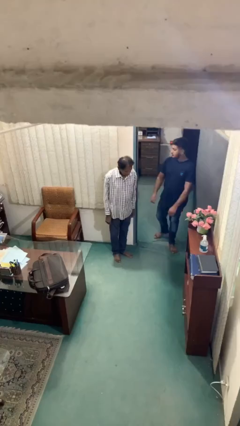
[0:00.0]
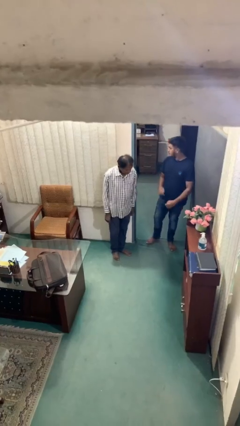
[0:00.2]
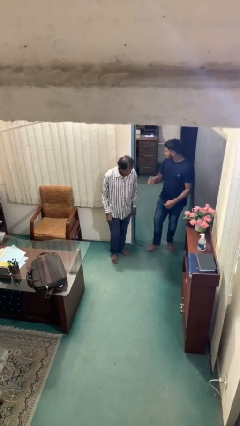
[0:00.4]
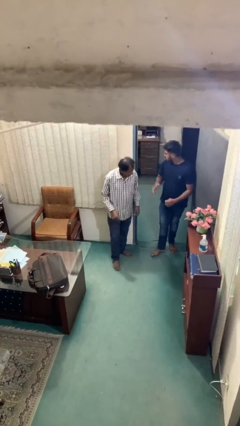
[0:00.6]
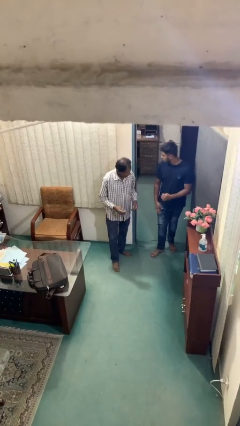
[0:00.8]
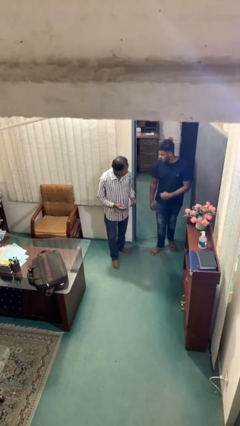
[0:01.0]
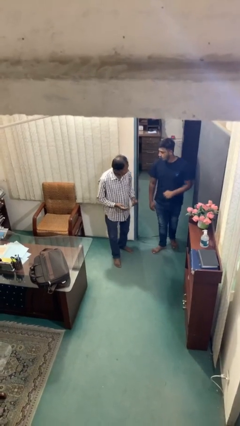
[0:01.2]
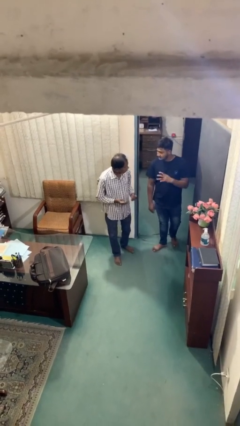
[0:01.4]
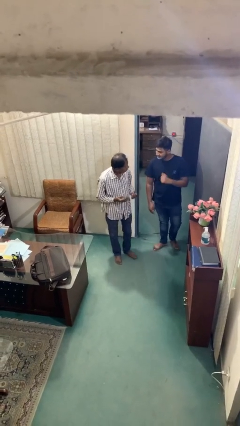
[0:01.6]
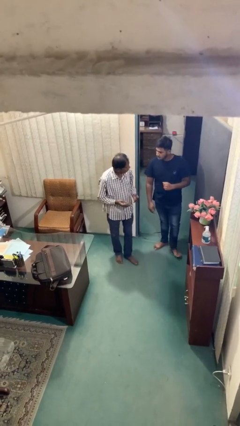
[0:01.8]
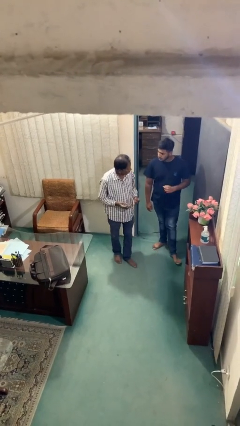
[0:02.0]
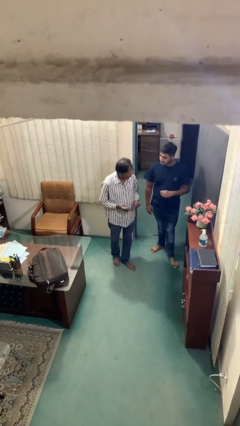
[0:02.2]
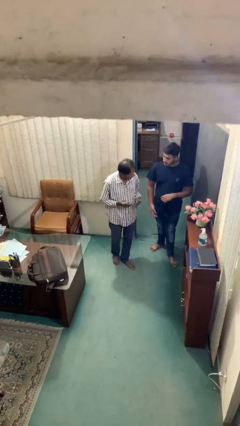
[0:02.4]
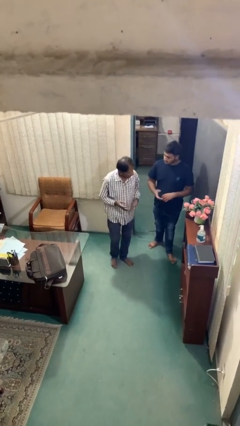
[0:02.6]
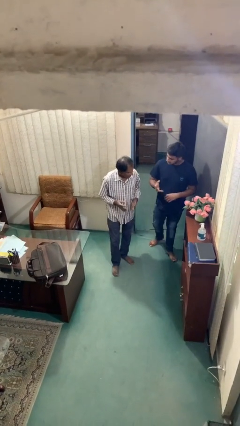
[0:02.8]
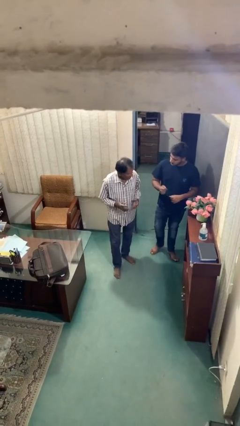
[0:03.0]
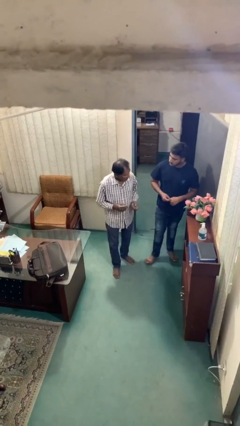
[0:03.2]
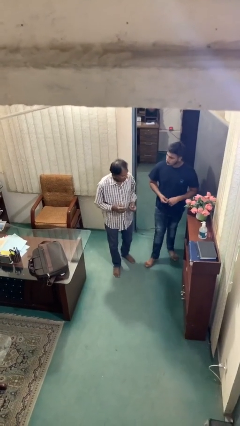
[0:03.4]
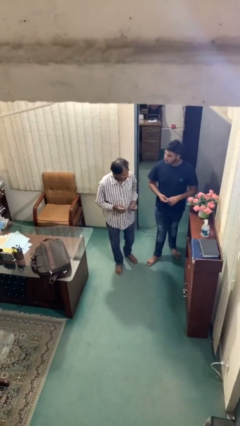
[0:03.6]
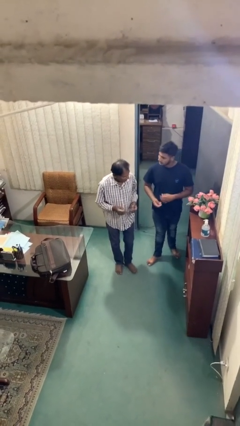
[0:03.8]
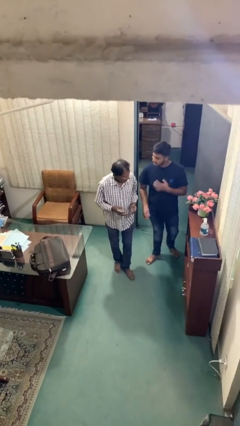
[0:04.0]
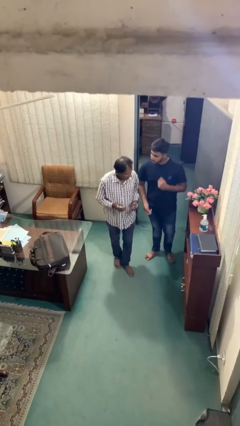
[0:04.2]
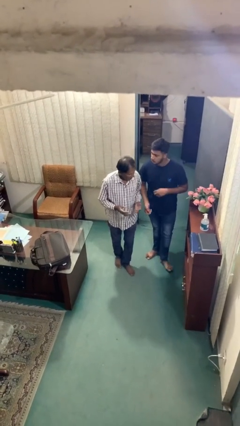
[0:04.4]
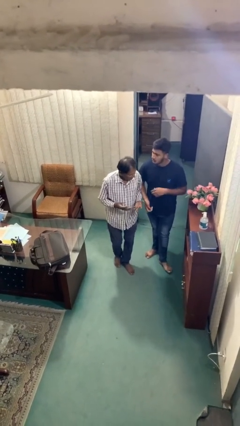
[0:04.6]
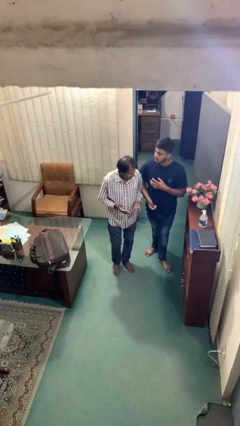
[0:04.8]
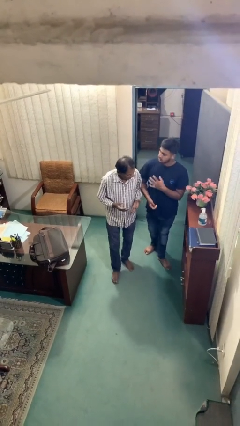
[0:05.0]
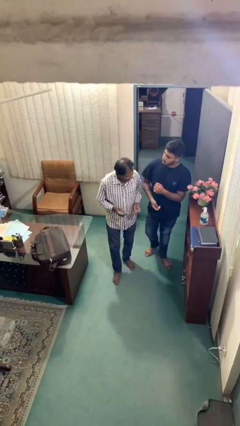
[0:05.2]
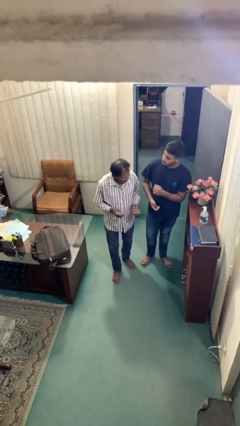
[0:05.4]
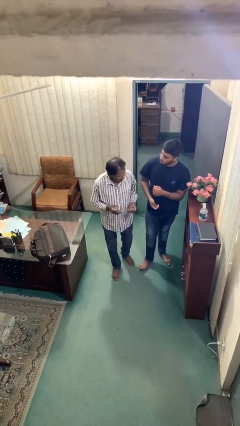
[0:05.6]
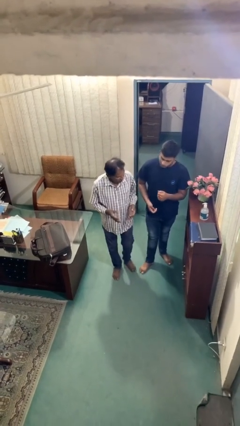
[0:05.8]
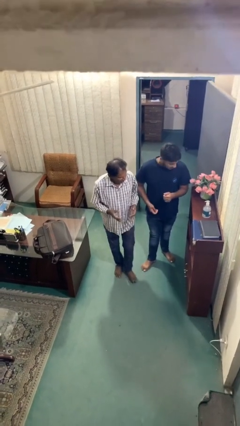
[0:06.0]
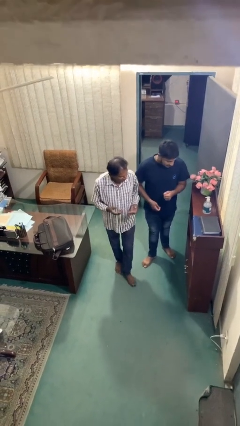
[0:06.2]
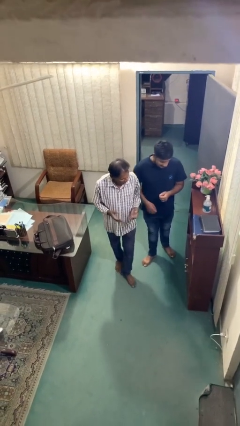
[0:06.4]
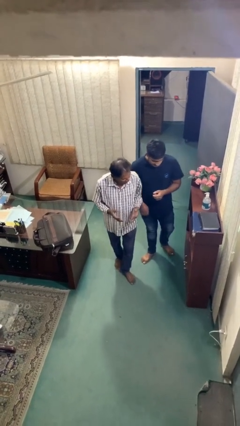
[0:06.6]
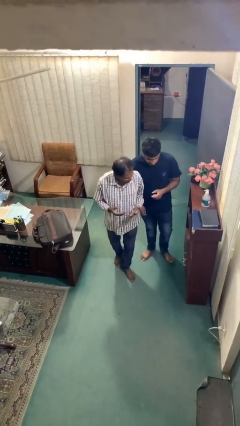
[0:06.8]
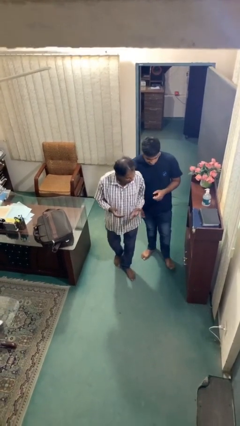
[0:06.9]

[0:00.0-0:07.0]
person talks to person

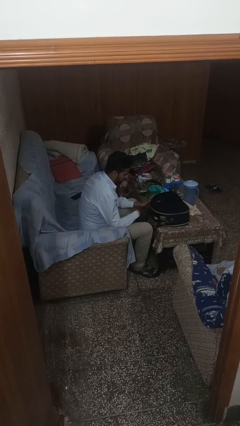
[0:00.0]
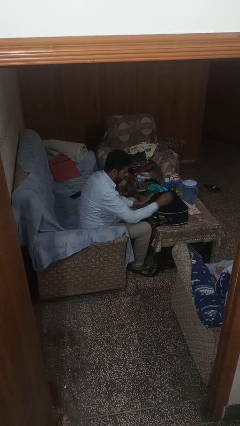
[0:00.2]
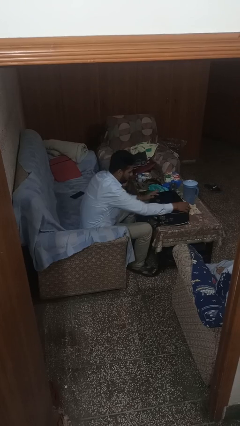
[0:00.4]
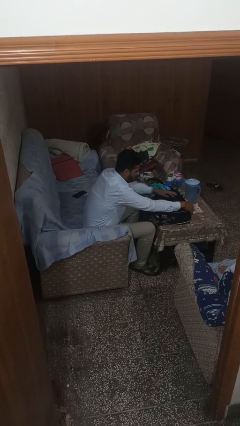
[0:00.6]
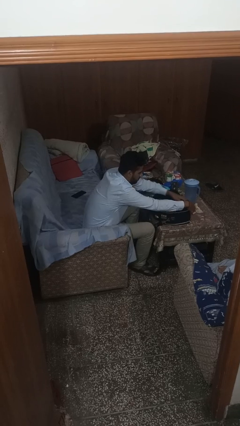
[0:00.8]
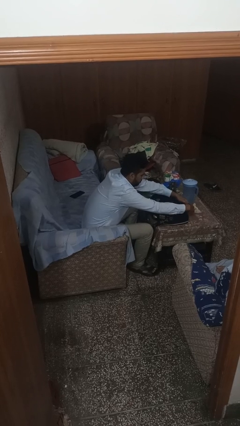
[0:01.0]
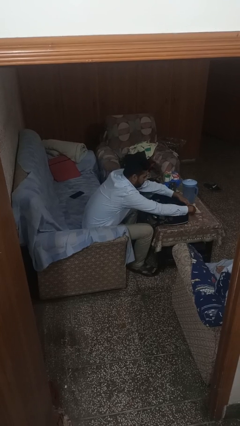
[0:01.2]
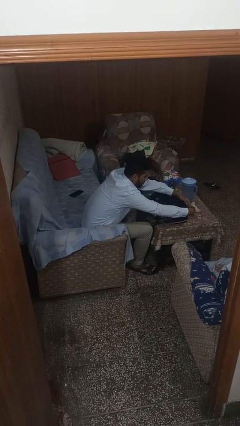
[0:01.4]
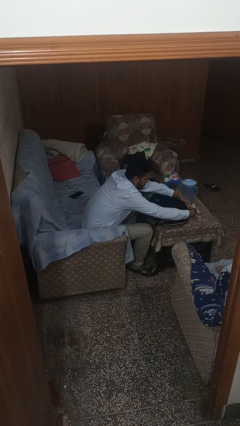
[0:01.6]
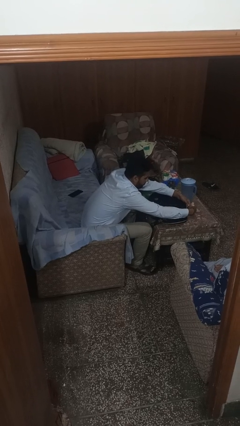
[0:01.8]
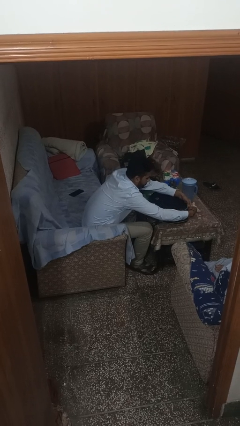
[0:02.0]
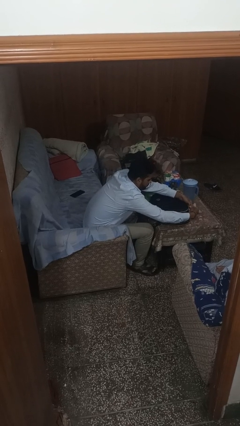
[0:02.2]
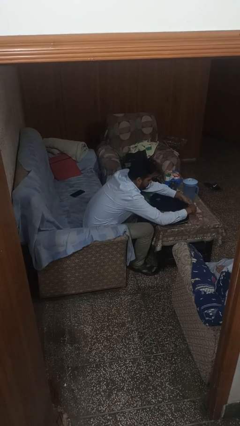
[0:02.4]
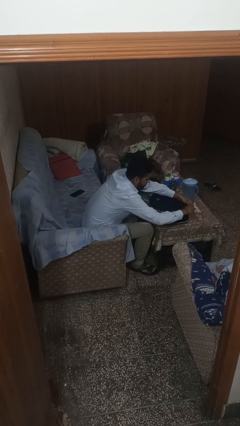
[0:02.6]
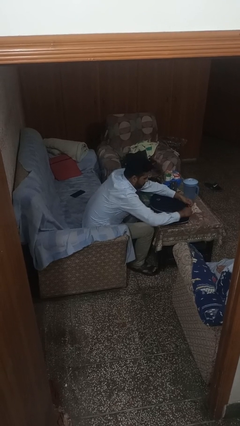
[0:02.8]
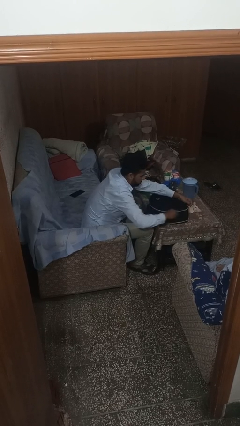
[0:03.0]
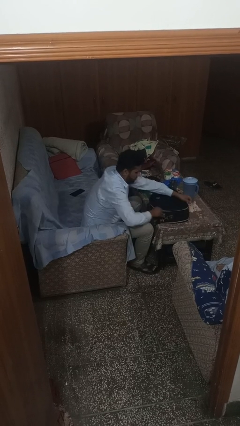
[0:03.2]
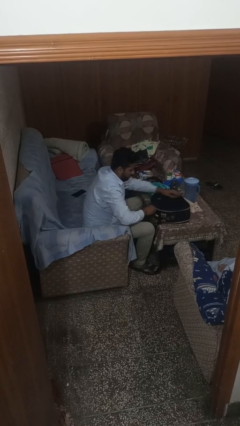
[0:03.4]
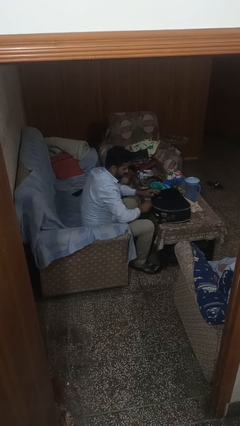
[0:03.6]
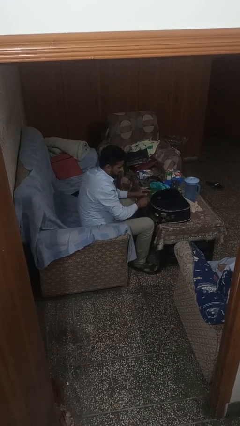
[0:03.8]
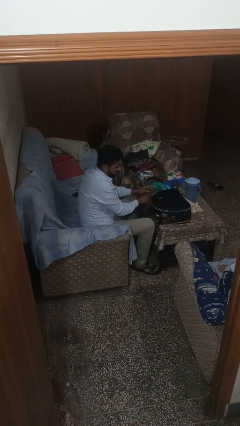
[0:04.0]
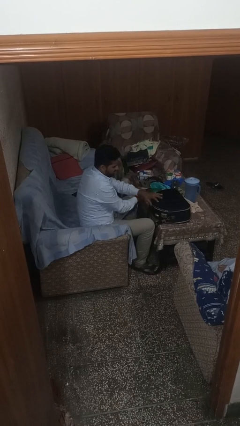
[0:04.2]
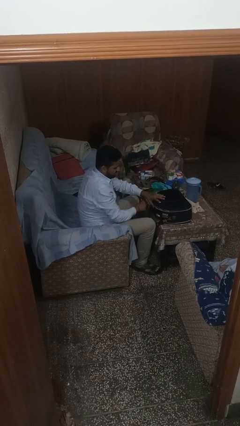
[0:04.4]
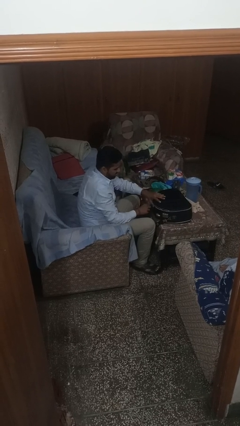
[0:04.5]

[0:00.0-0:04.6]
person opens suitcase

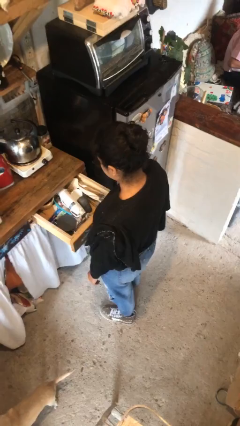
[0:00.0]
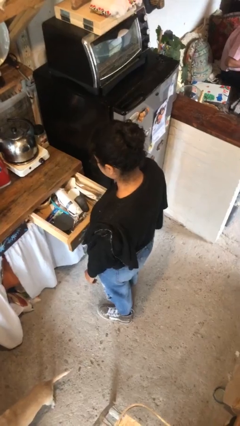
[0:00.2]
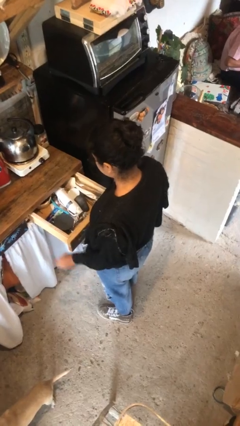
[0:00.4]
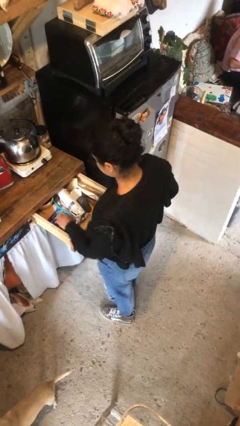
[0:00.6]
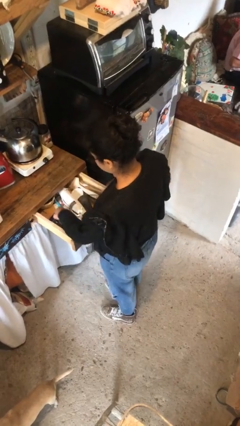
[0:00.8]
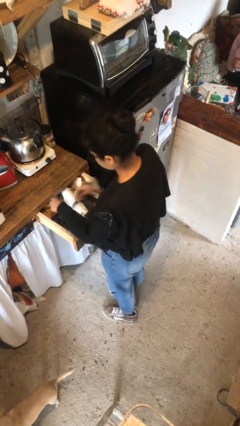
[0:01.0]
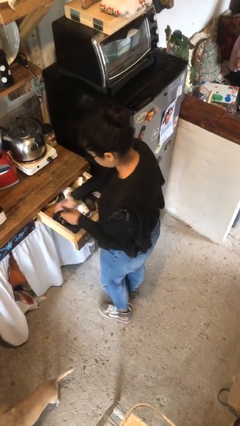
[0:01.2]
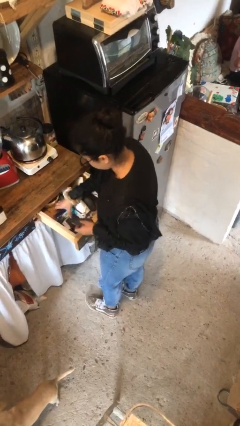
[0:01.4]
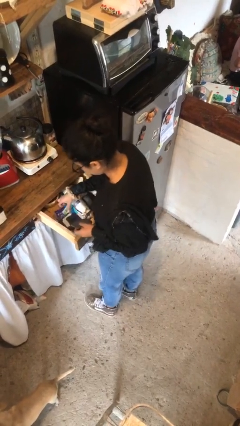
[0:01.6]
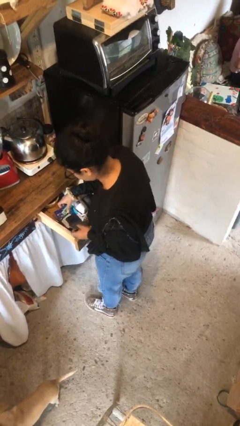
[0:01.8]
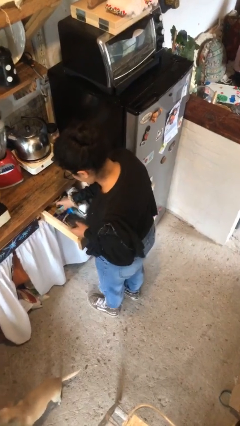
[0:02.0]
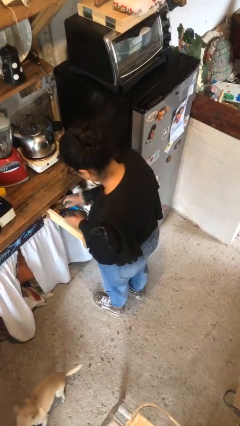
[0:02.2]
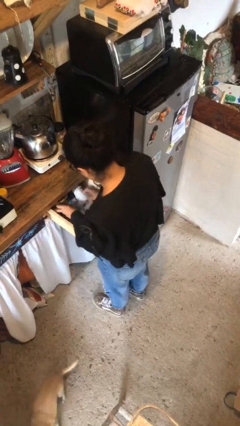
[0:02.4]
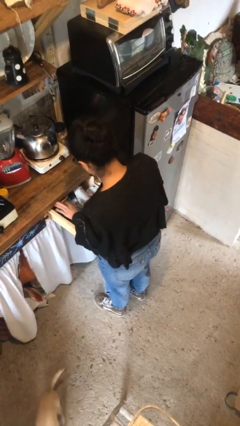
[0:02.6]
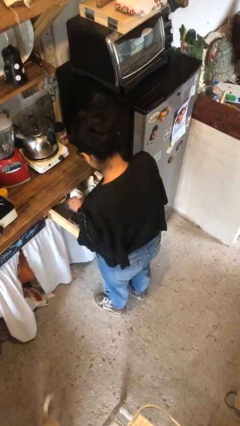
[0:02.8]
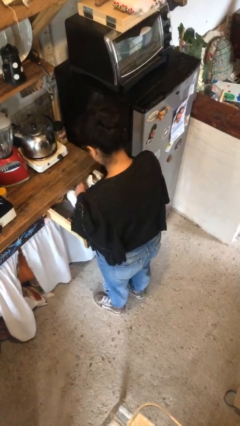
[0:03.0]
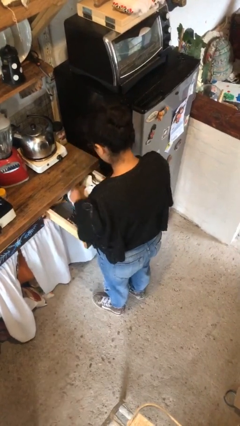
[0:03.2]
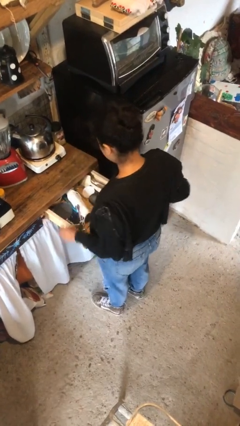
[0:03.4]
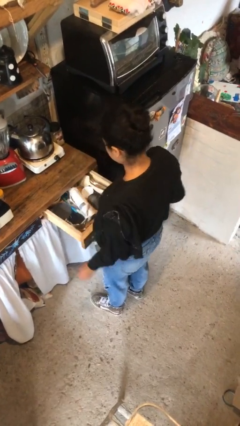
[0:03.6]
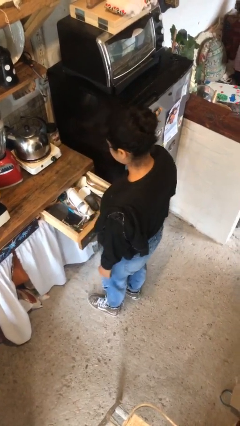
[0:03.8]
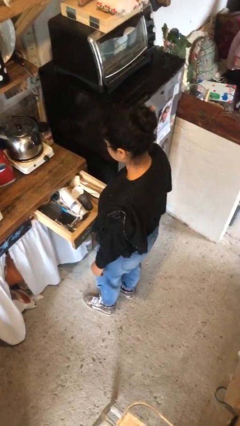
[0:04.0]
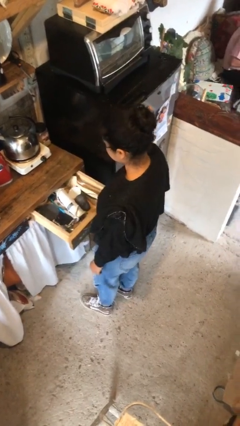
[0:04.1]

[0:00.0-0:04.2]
person searches in kitchen drawer

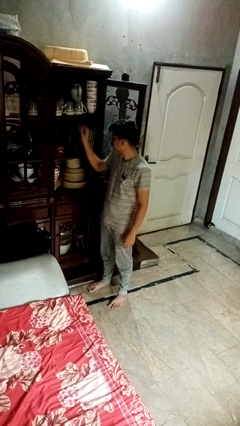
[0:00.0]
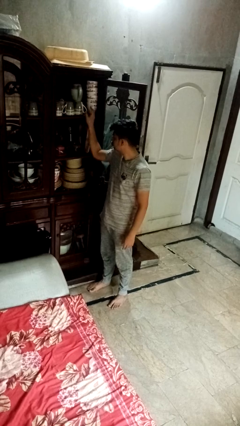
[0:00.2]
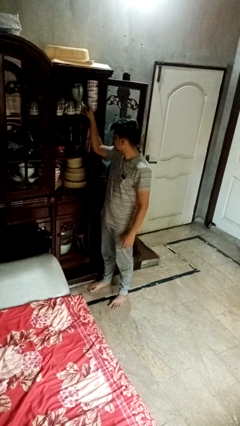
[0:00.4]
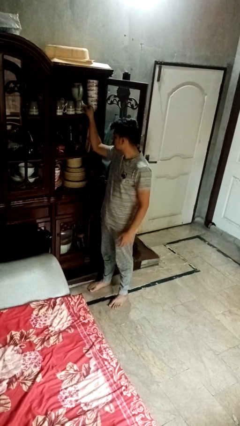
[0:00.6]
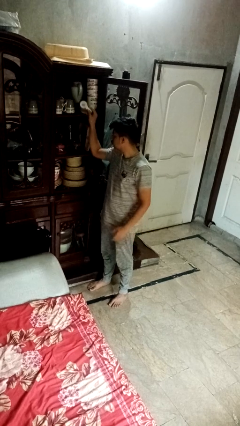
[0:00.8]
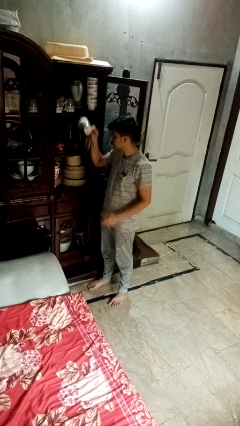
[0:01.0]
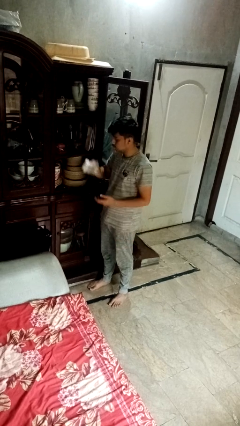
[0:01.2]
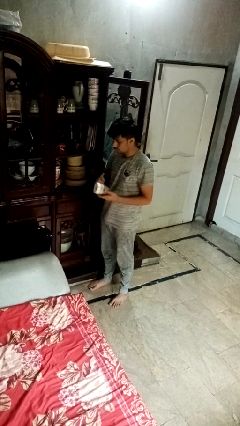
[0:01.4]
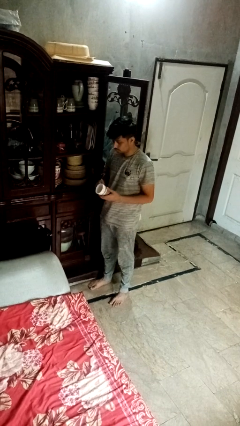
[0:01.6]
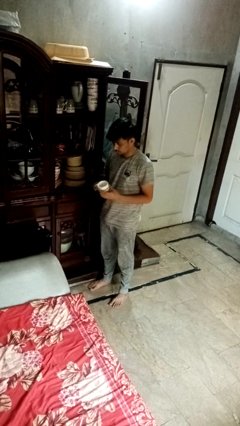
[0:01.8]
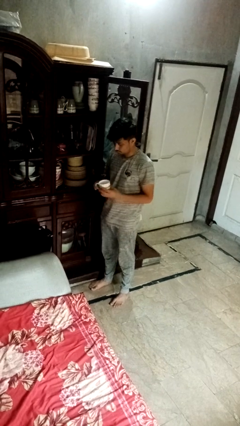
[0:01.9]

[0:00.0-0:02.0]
person takes object from cabinet
